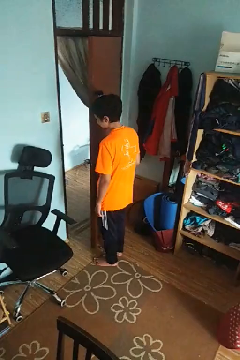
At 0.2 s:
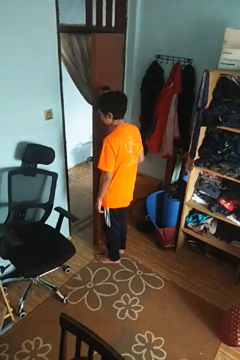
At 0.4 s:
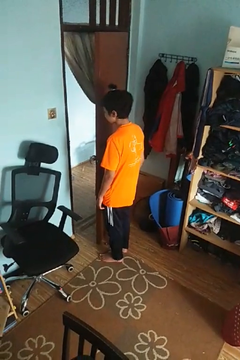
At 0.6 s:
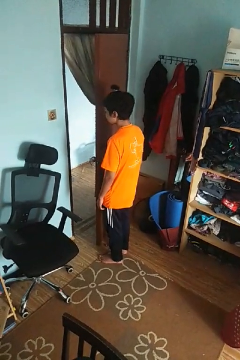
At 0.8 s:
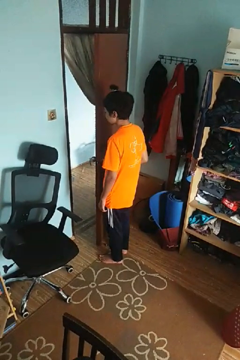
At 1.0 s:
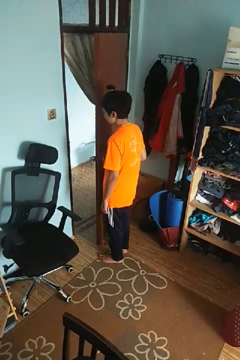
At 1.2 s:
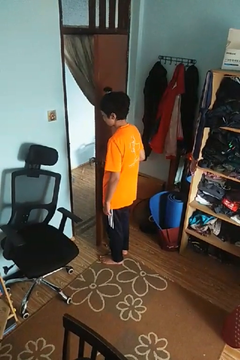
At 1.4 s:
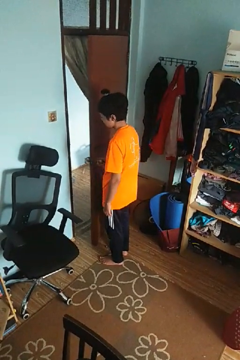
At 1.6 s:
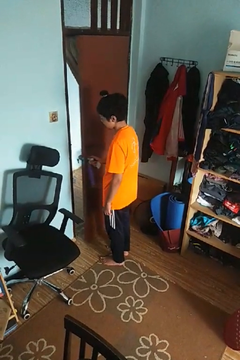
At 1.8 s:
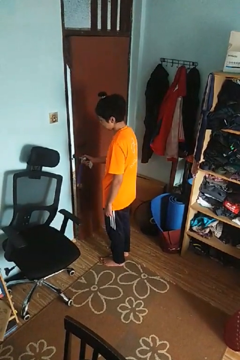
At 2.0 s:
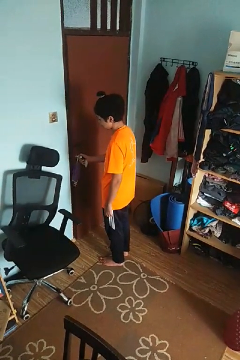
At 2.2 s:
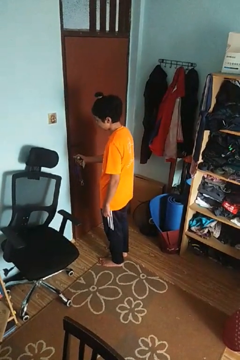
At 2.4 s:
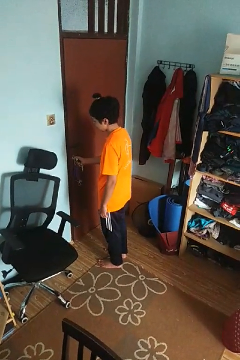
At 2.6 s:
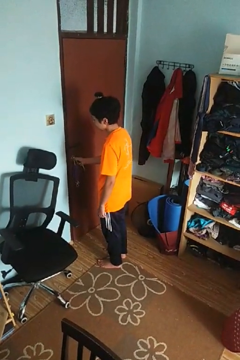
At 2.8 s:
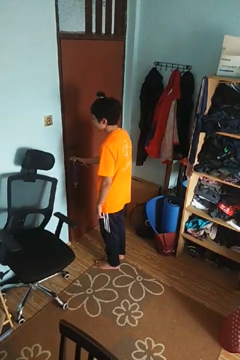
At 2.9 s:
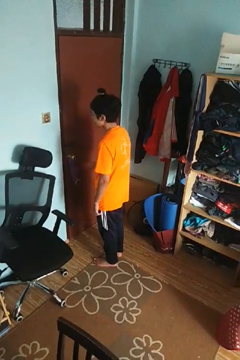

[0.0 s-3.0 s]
person closes facility door

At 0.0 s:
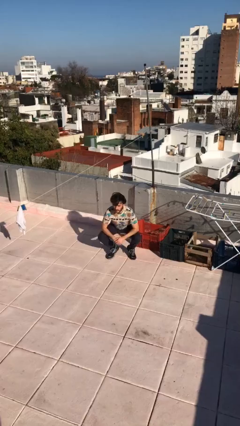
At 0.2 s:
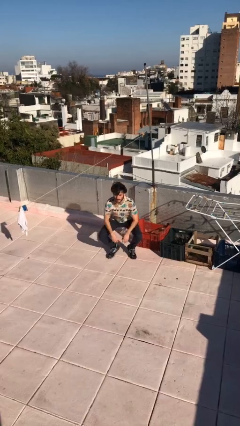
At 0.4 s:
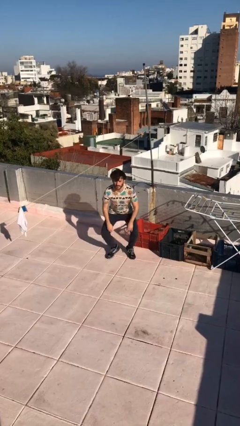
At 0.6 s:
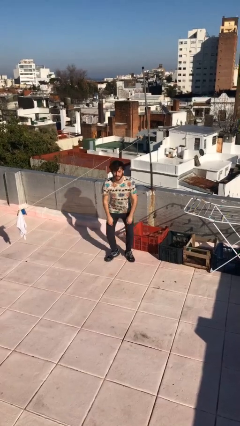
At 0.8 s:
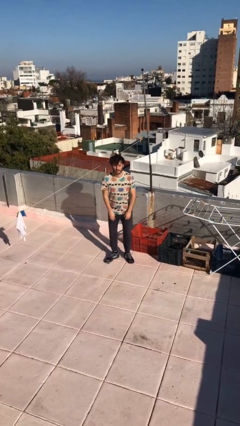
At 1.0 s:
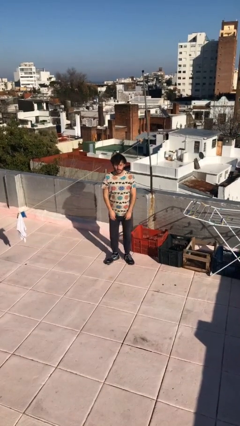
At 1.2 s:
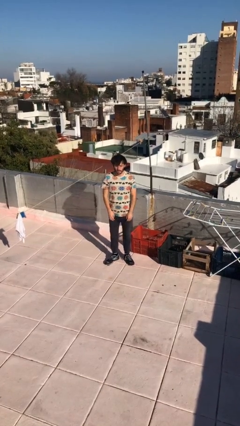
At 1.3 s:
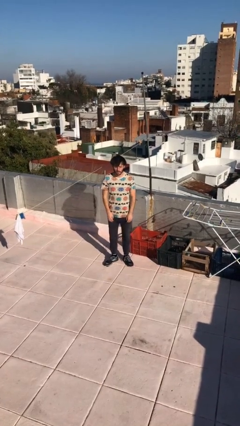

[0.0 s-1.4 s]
person stands up

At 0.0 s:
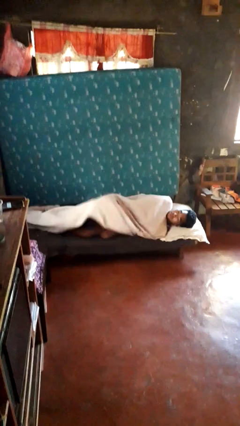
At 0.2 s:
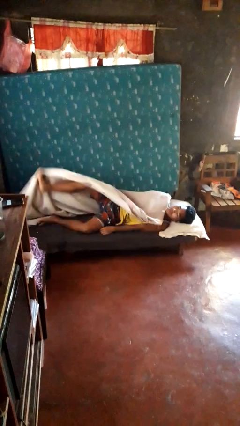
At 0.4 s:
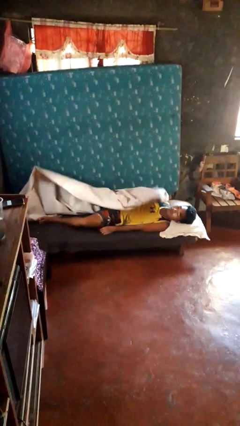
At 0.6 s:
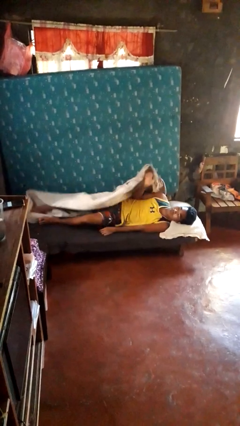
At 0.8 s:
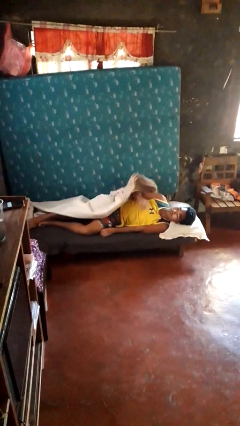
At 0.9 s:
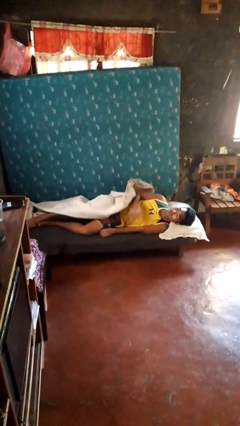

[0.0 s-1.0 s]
person uncovers with bedsheets

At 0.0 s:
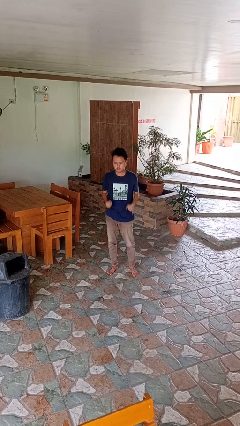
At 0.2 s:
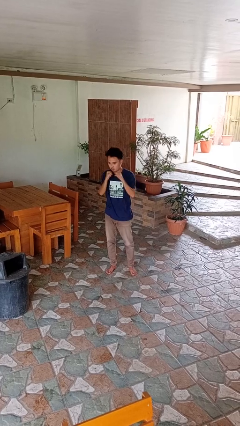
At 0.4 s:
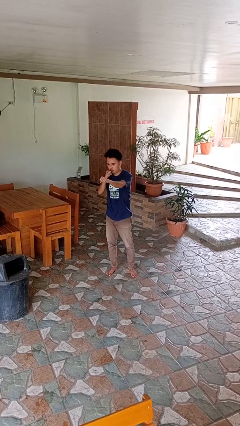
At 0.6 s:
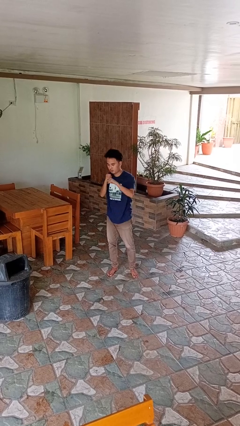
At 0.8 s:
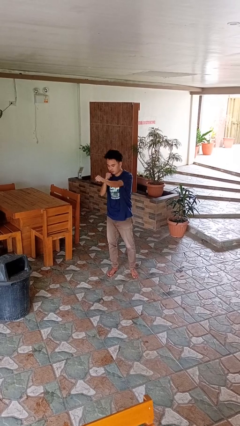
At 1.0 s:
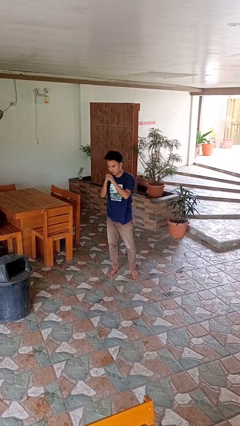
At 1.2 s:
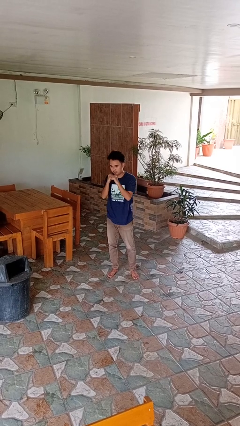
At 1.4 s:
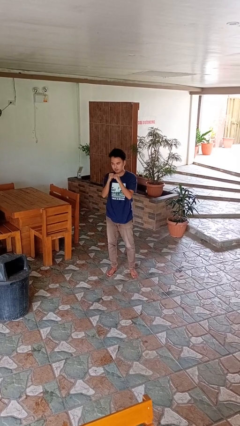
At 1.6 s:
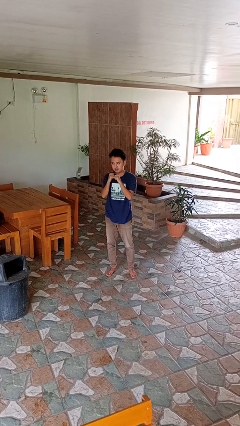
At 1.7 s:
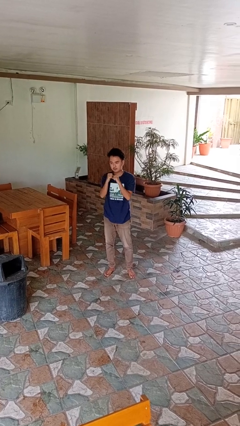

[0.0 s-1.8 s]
person punches

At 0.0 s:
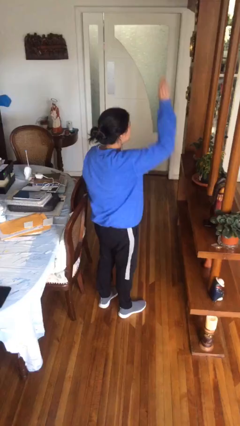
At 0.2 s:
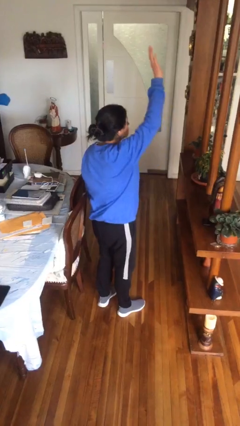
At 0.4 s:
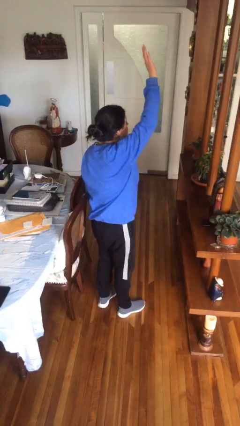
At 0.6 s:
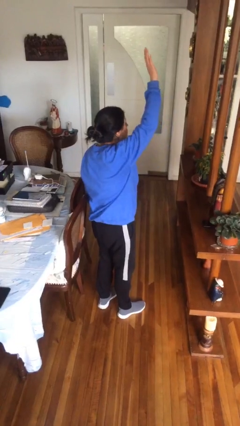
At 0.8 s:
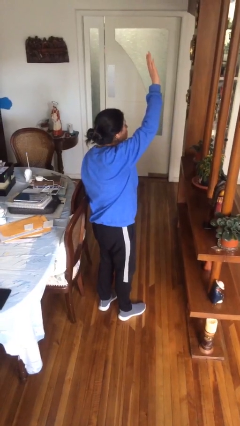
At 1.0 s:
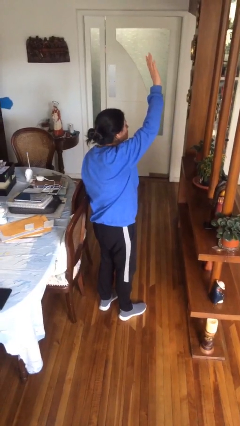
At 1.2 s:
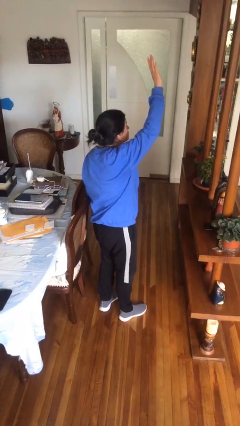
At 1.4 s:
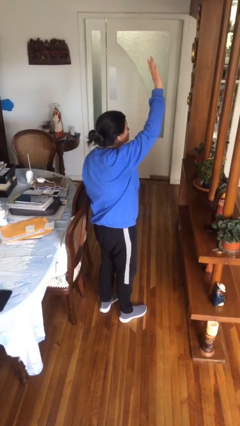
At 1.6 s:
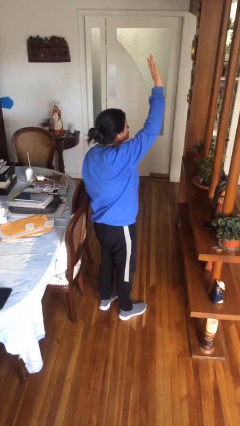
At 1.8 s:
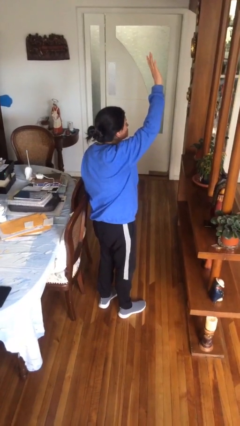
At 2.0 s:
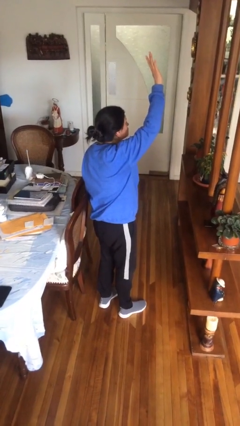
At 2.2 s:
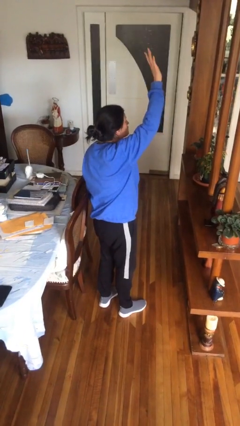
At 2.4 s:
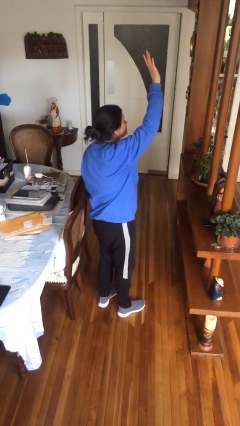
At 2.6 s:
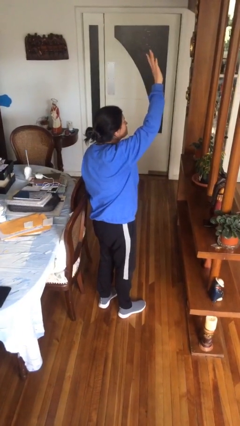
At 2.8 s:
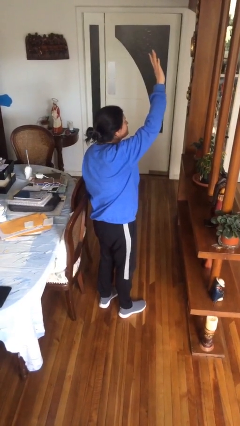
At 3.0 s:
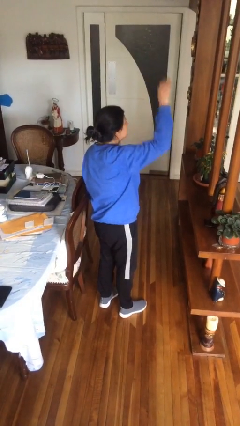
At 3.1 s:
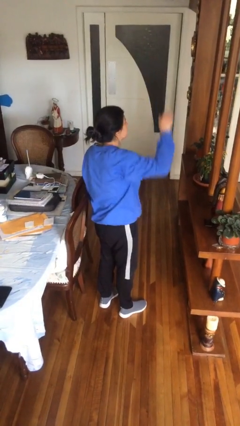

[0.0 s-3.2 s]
person gestures raise hand

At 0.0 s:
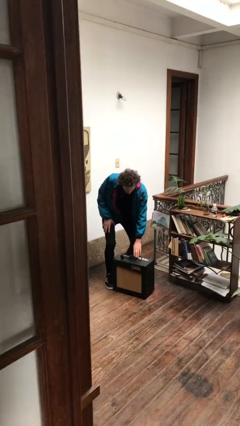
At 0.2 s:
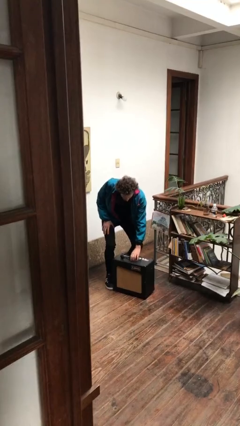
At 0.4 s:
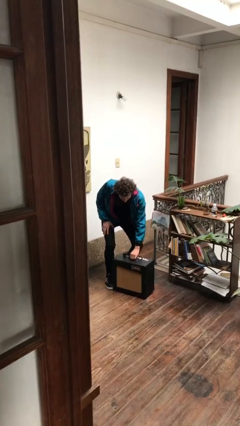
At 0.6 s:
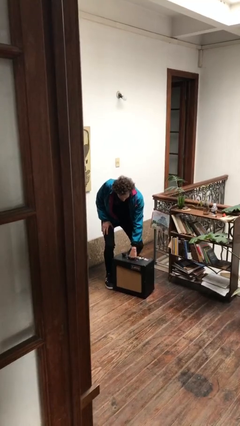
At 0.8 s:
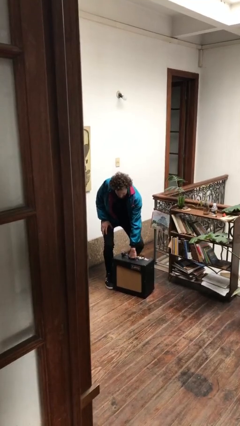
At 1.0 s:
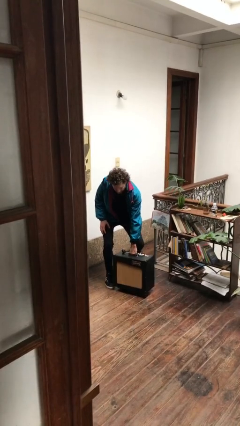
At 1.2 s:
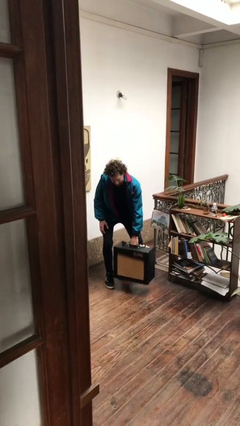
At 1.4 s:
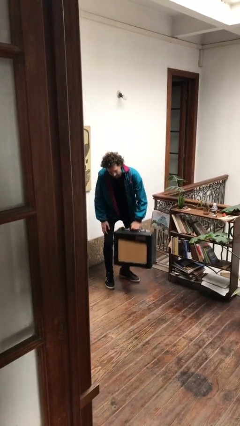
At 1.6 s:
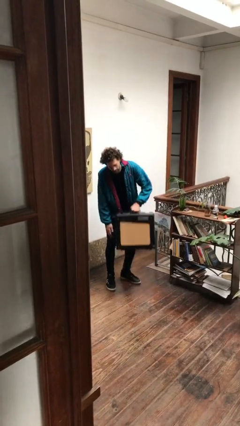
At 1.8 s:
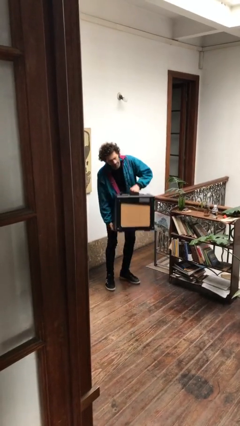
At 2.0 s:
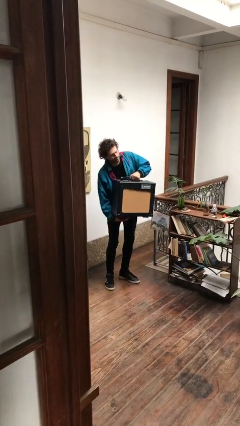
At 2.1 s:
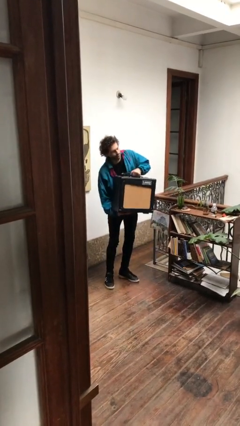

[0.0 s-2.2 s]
person picks up object from floor

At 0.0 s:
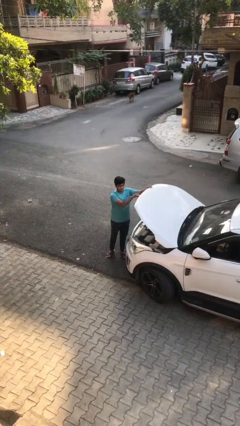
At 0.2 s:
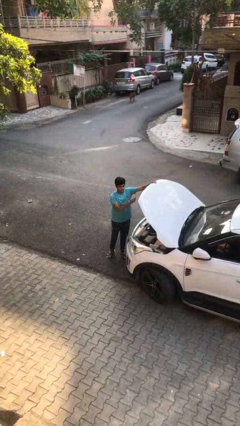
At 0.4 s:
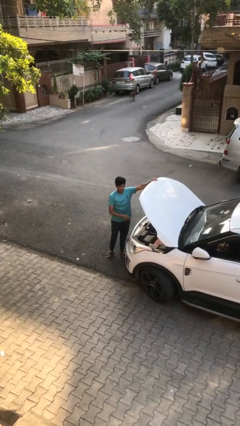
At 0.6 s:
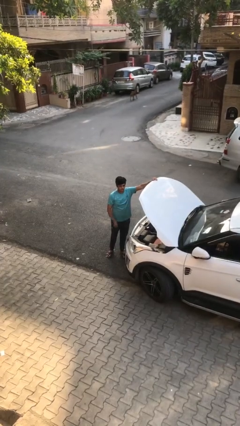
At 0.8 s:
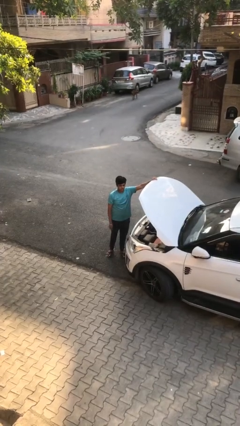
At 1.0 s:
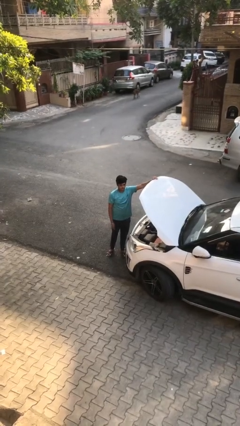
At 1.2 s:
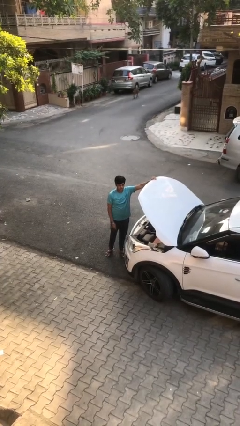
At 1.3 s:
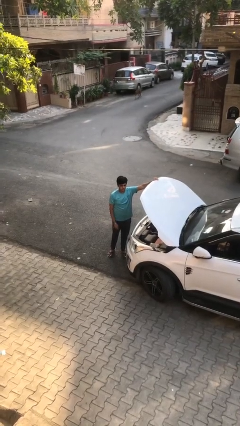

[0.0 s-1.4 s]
person opens car hood

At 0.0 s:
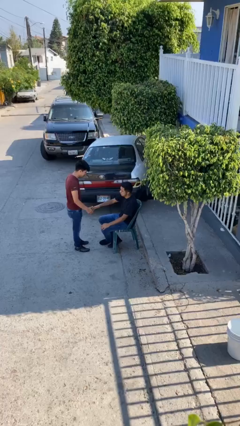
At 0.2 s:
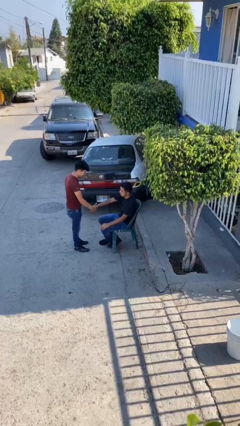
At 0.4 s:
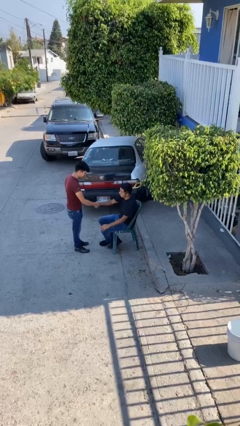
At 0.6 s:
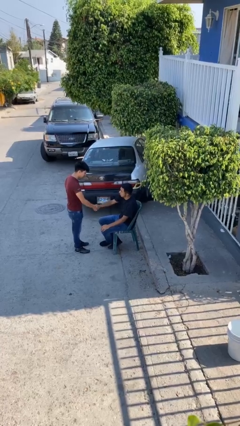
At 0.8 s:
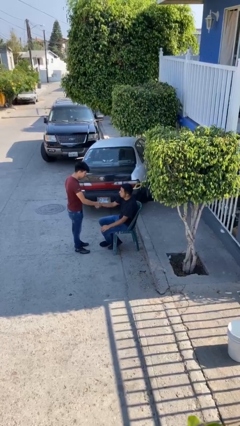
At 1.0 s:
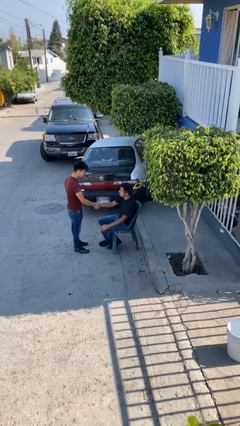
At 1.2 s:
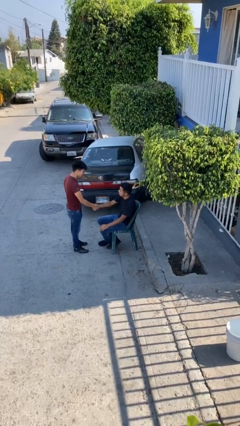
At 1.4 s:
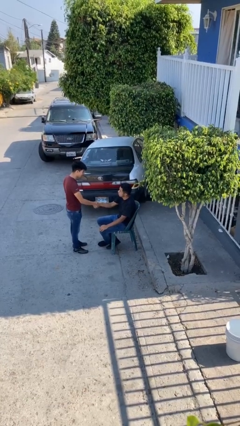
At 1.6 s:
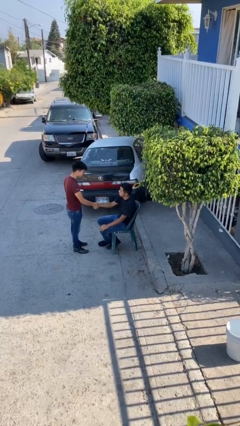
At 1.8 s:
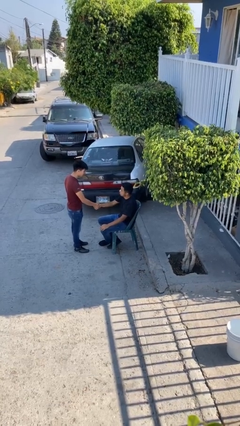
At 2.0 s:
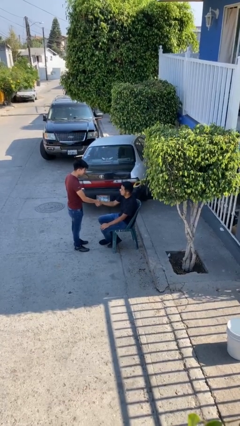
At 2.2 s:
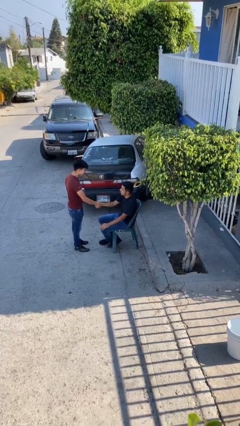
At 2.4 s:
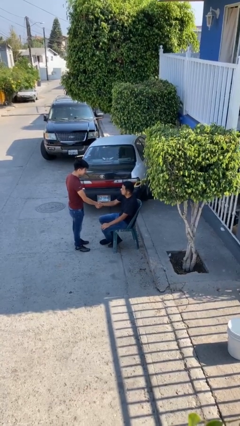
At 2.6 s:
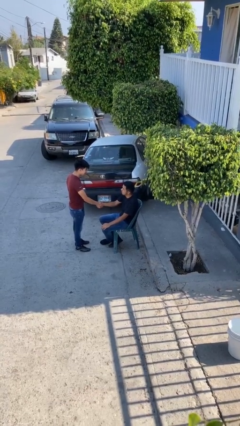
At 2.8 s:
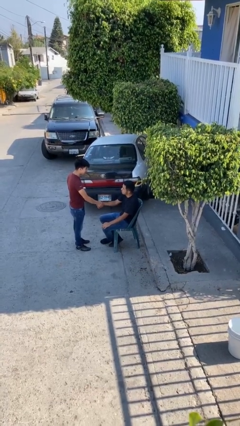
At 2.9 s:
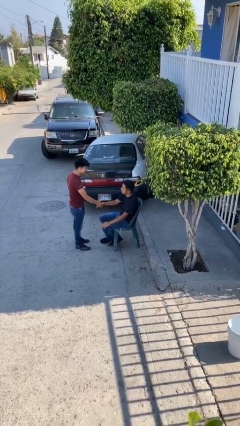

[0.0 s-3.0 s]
person shakes hand
